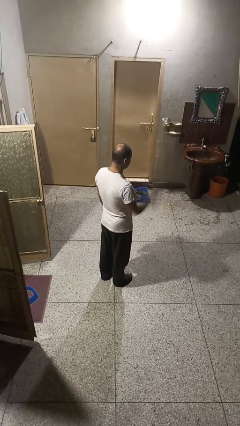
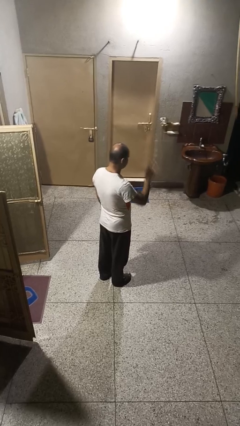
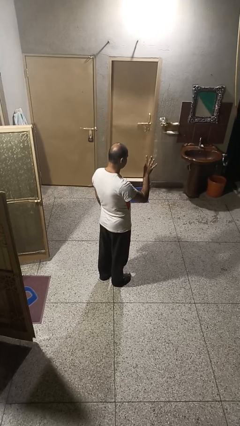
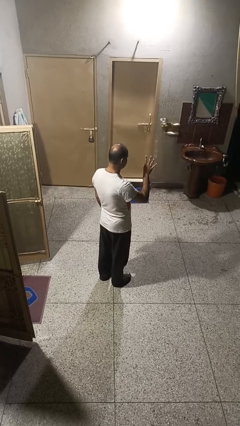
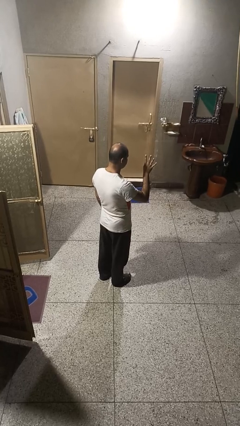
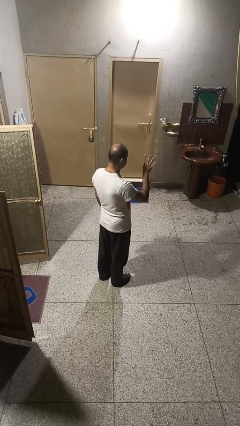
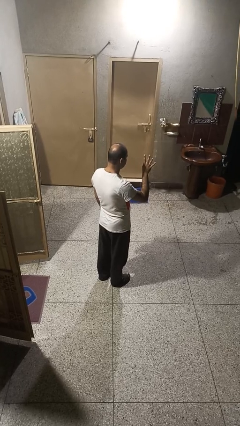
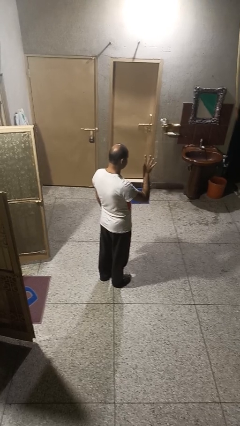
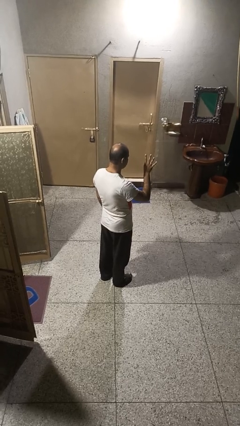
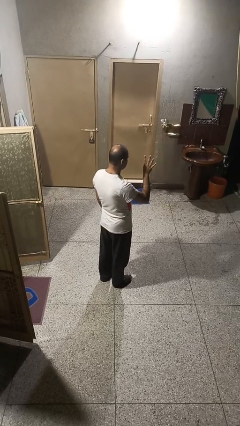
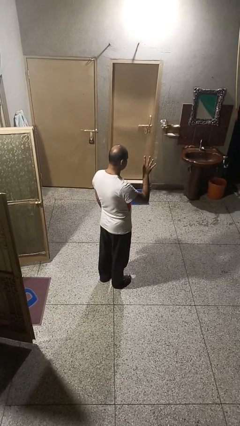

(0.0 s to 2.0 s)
person gestures number four

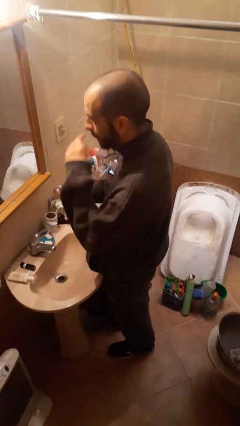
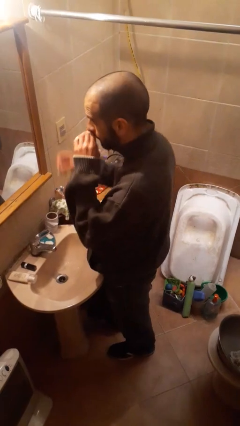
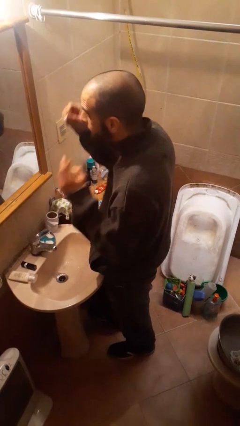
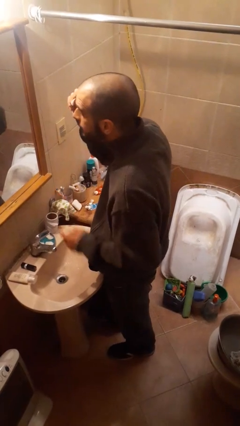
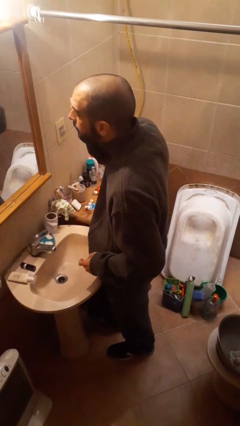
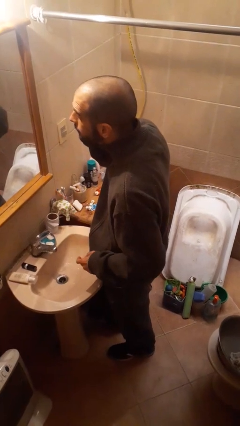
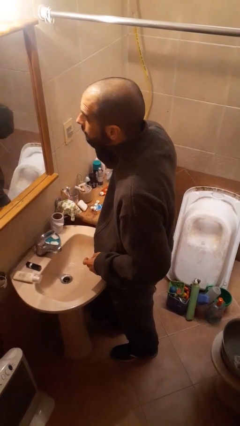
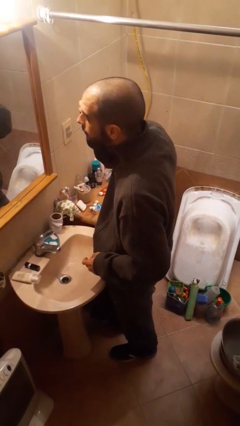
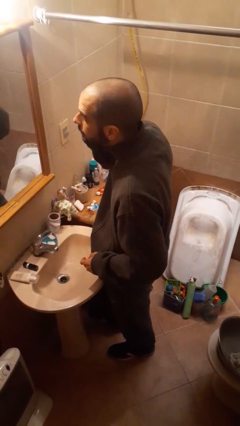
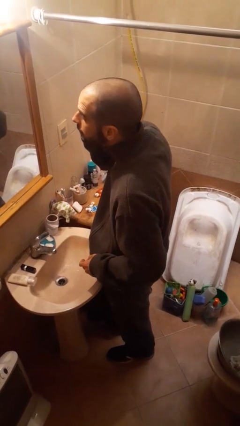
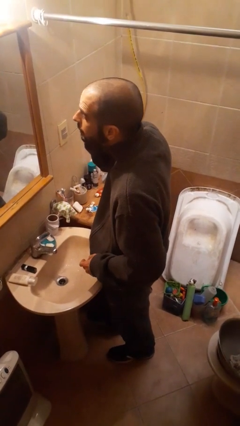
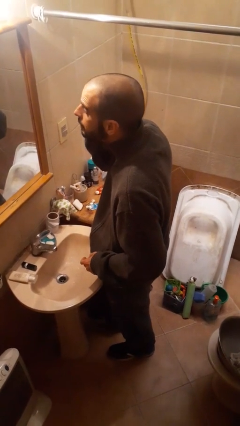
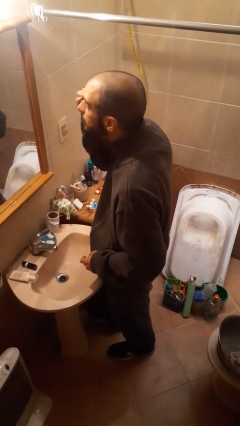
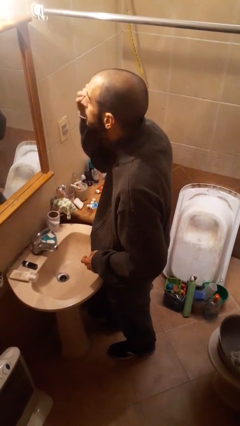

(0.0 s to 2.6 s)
person applies eye makeup

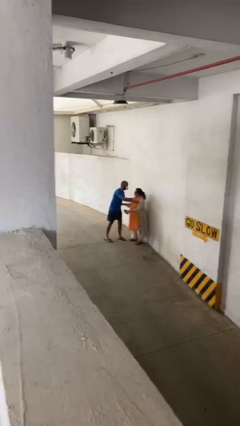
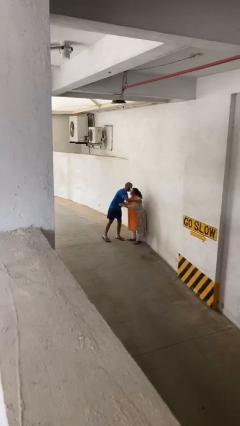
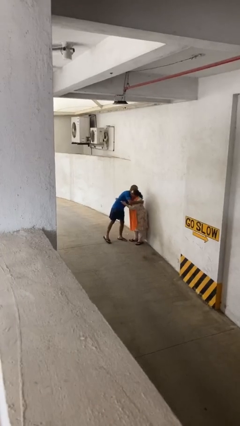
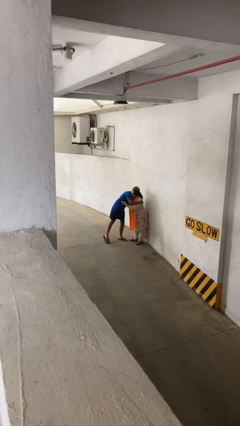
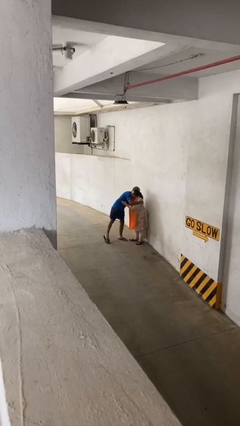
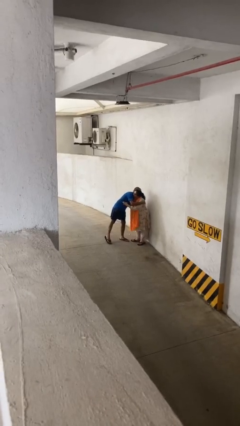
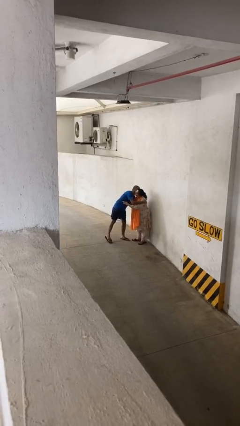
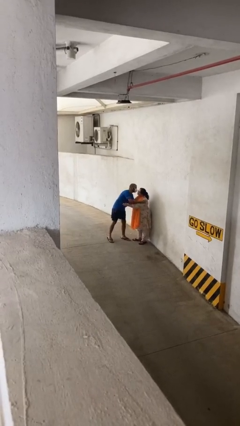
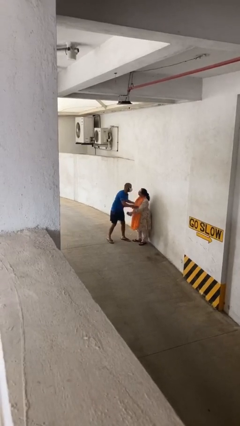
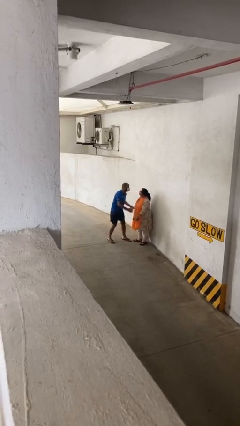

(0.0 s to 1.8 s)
person embraces person

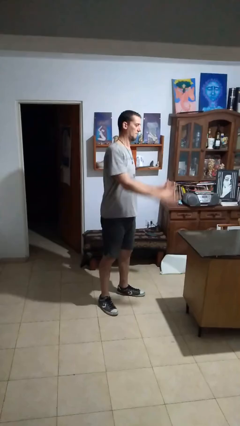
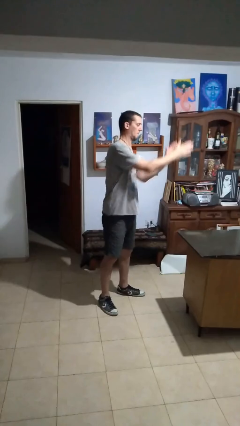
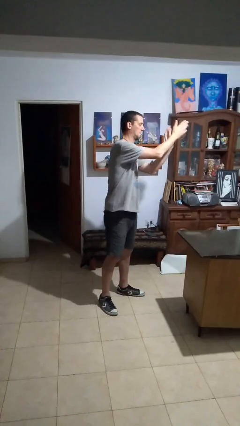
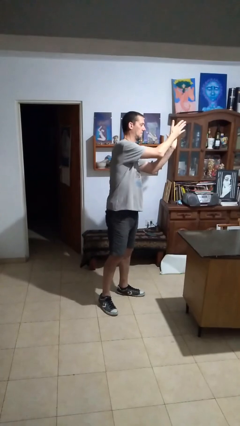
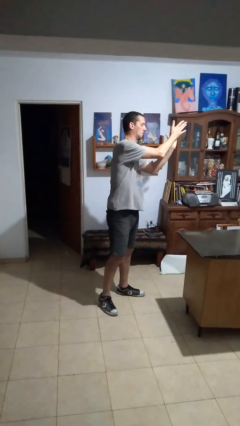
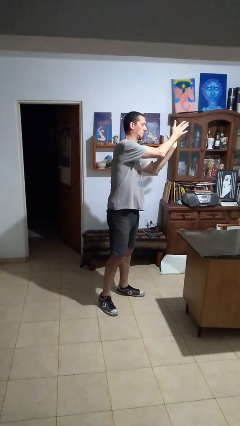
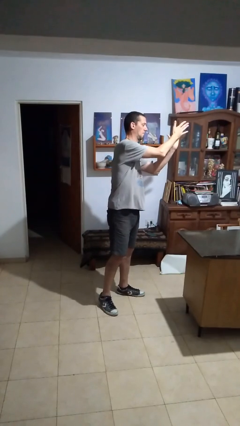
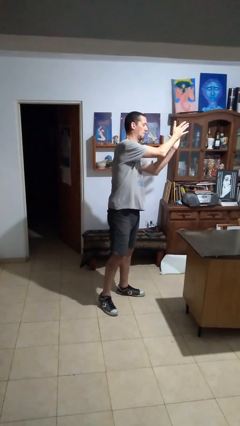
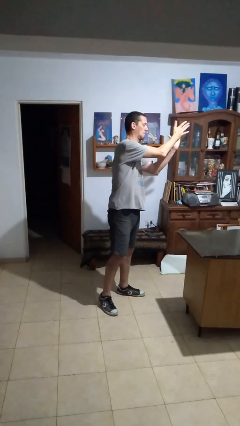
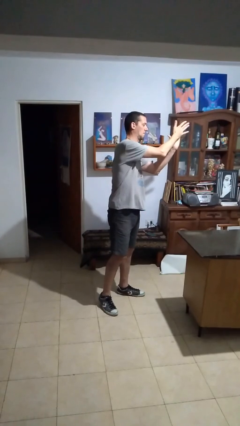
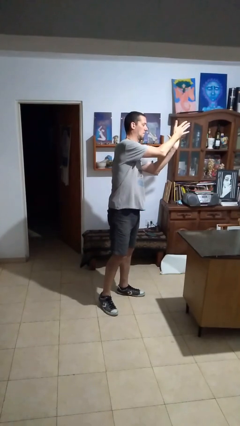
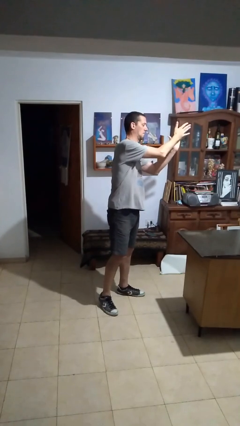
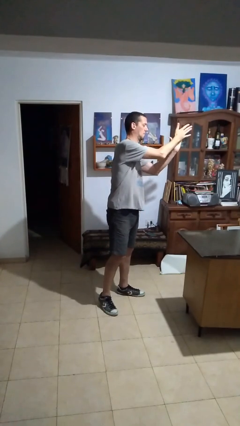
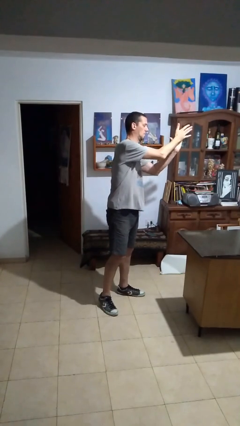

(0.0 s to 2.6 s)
person claps hands

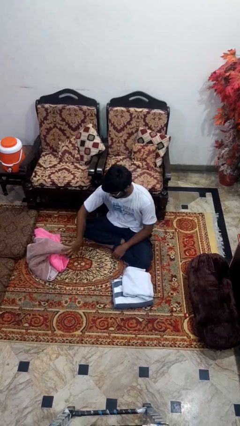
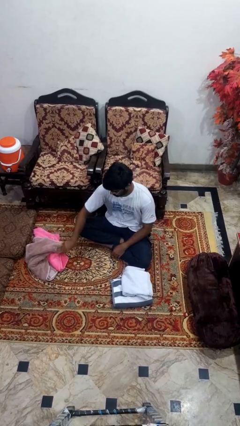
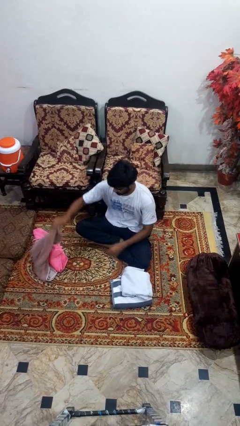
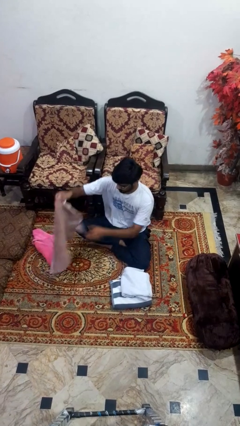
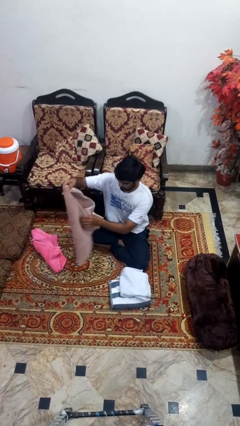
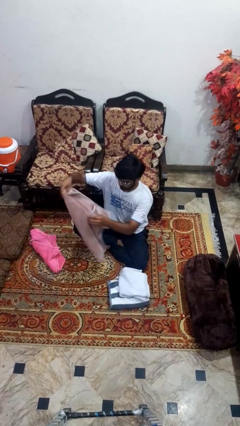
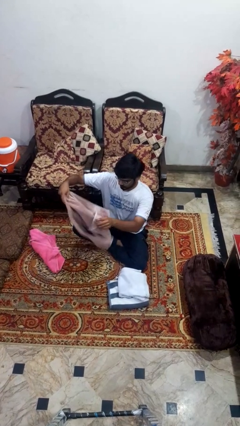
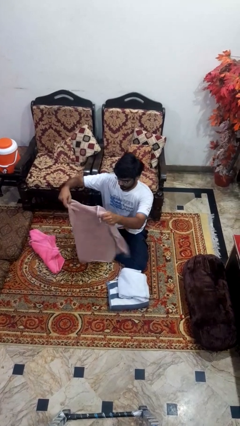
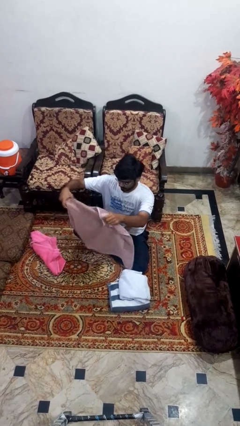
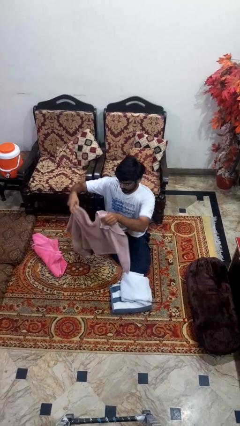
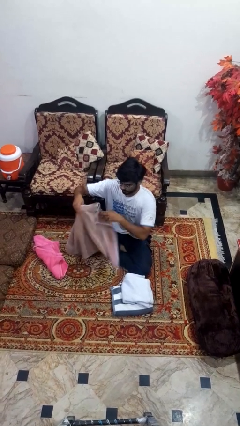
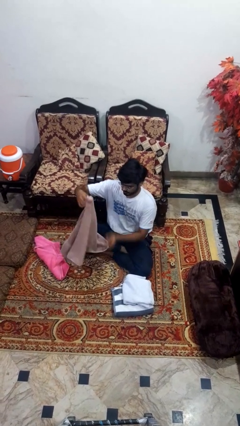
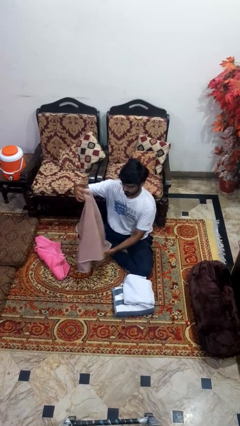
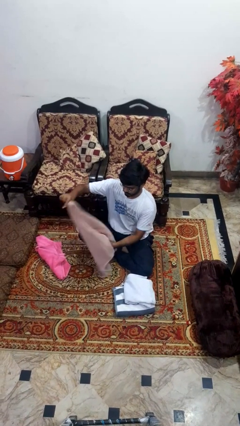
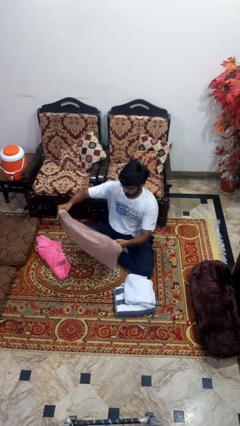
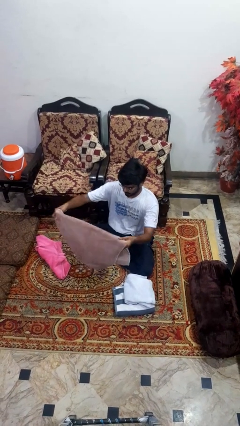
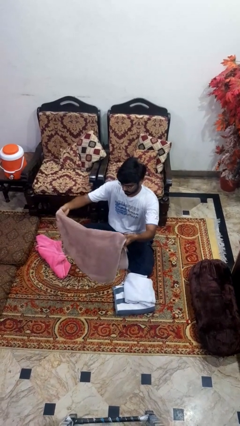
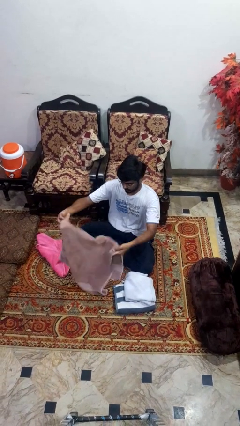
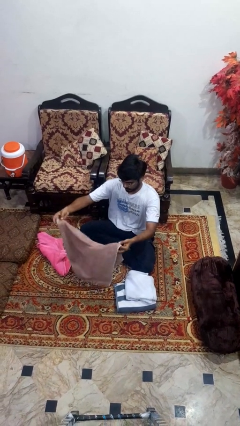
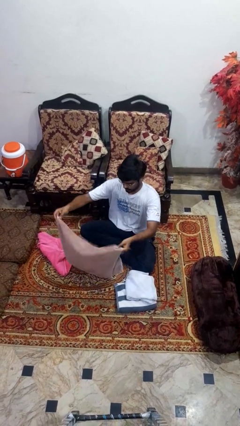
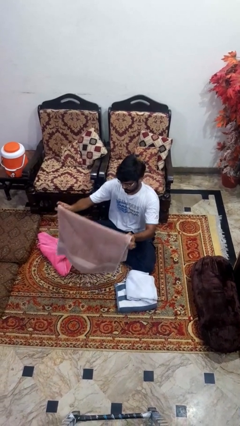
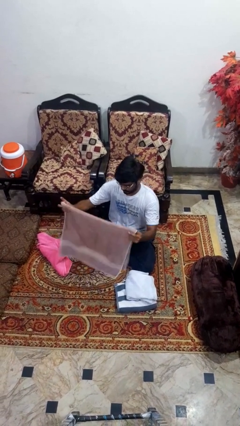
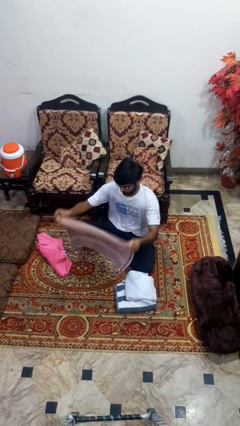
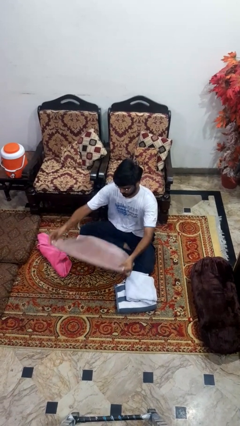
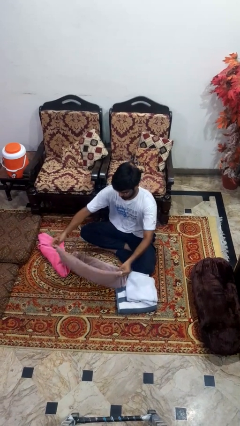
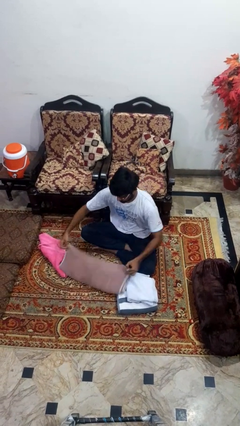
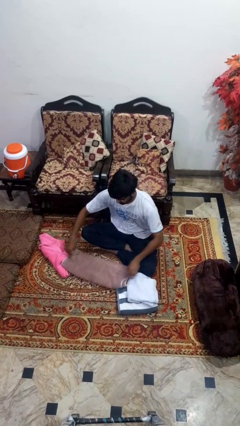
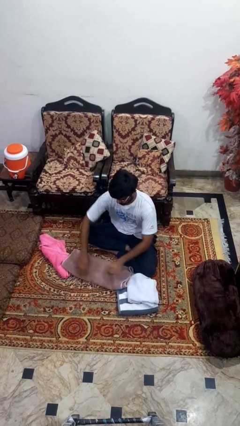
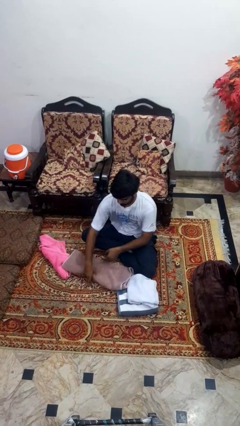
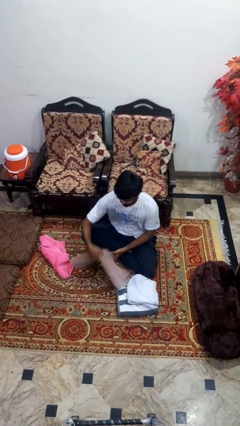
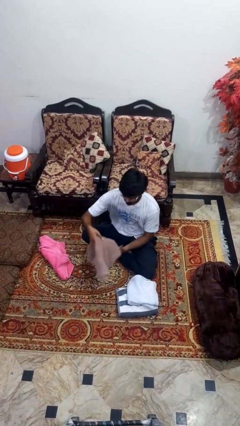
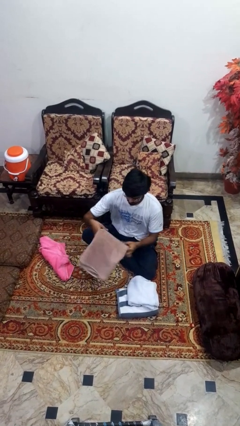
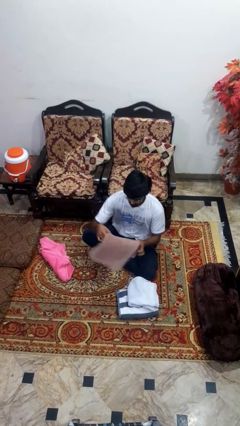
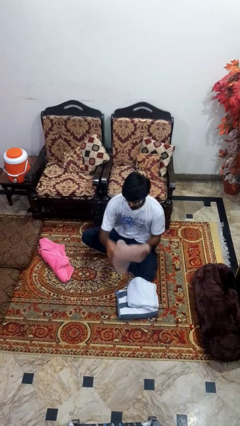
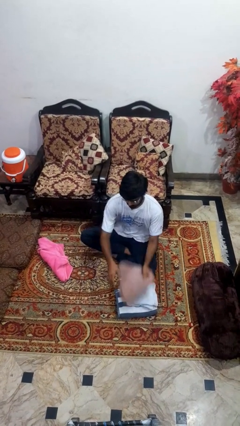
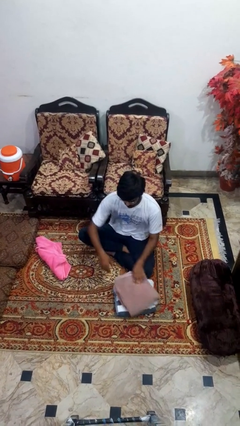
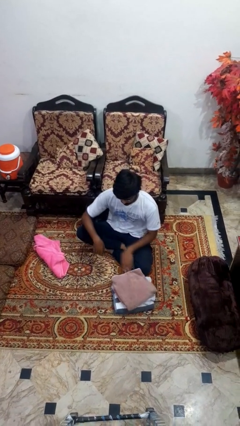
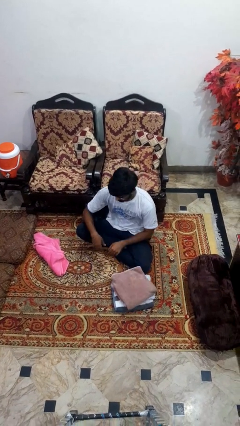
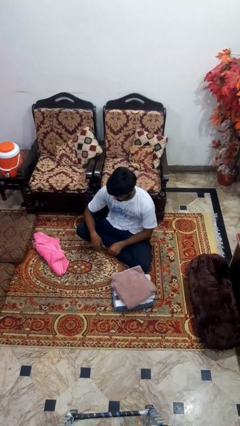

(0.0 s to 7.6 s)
person folds towel

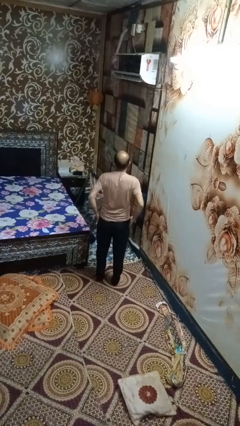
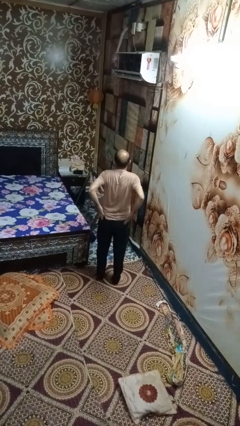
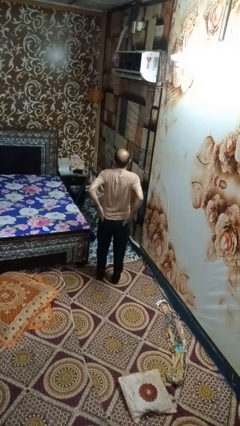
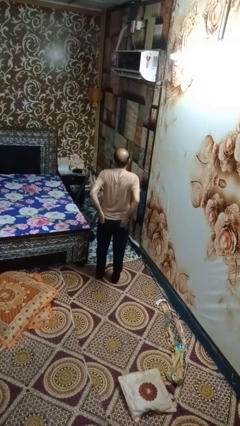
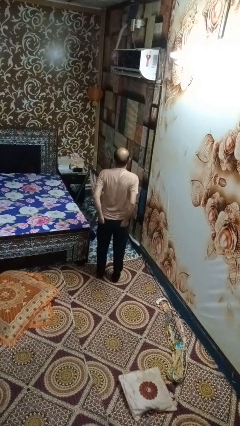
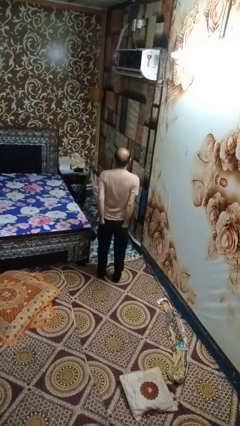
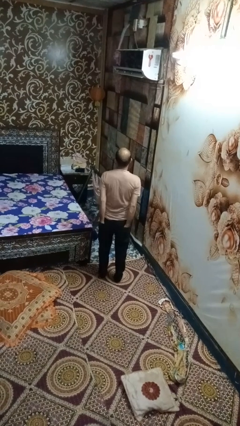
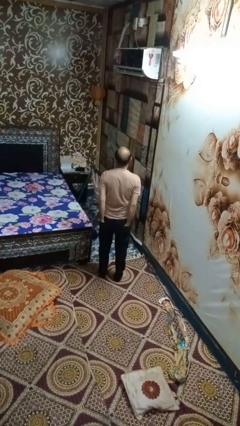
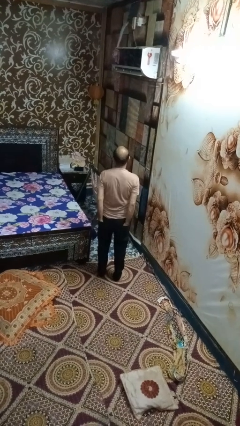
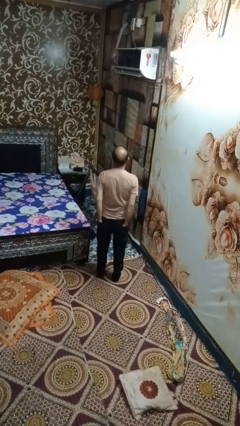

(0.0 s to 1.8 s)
person puts hands in back pockets
